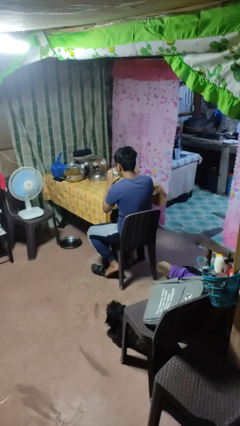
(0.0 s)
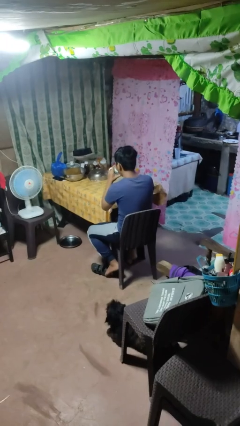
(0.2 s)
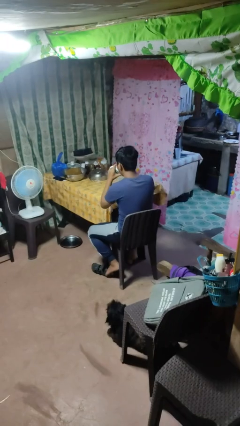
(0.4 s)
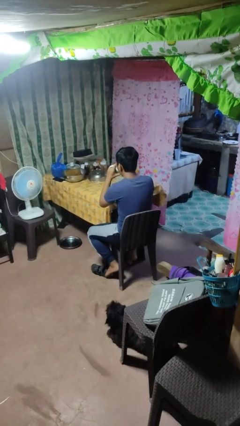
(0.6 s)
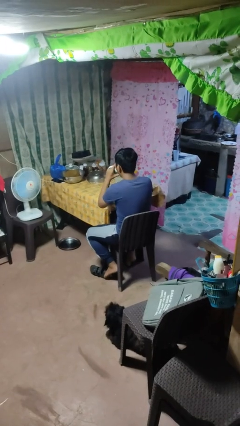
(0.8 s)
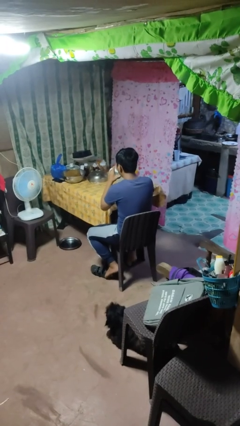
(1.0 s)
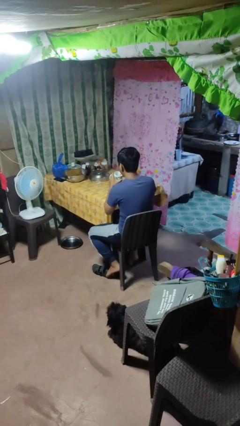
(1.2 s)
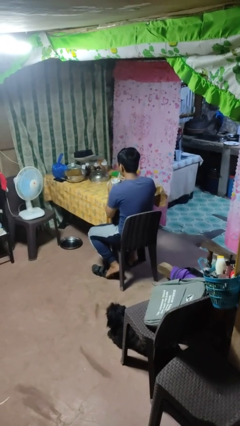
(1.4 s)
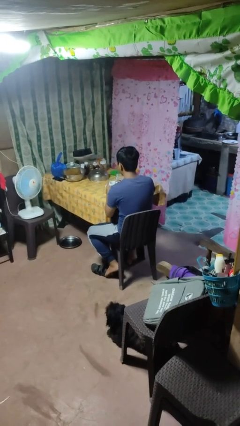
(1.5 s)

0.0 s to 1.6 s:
person drinks from mug

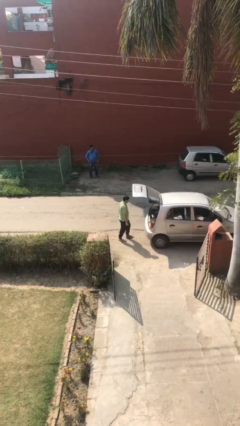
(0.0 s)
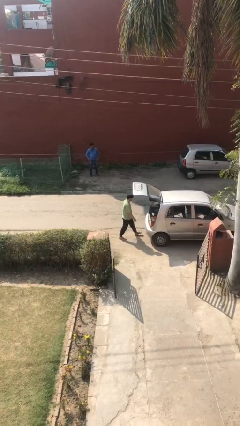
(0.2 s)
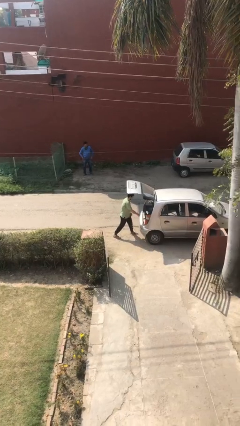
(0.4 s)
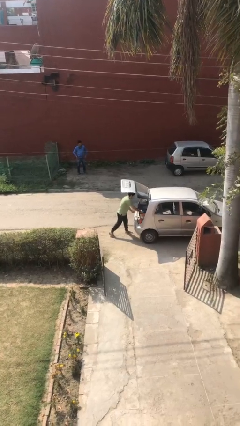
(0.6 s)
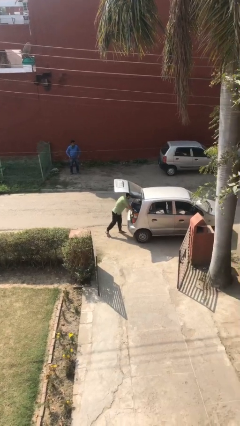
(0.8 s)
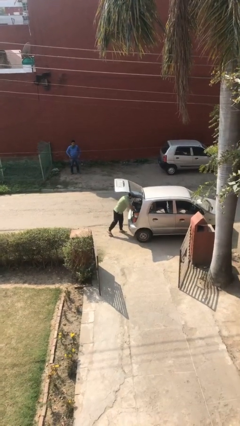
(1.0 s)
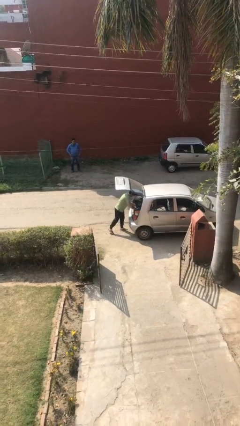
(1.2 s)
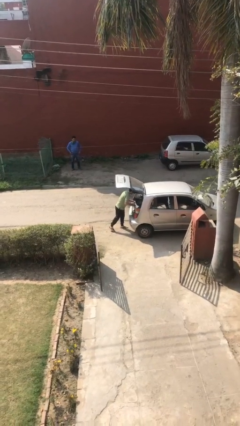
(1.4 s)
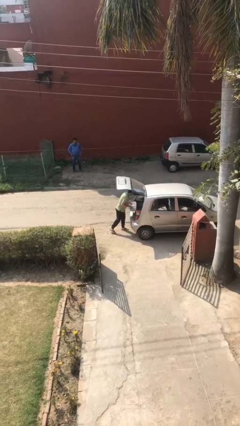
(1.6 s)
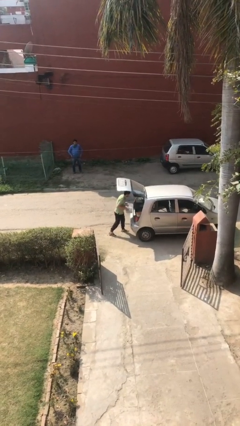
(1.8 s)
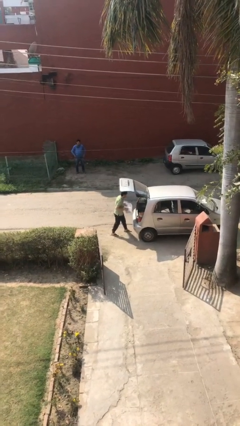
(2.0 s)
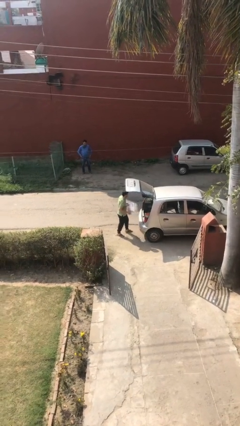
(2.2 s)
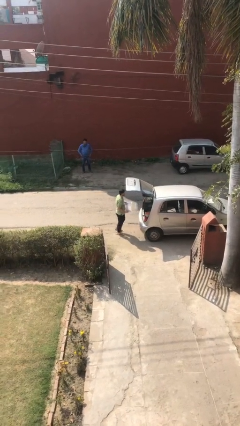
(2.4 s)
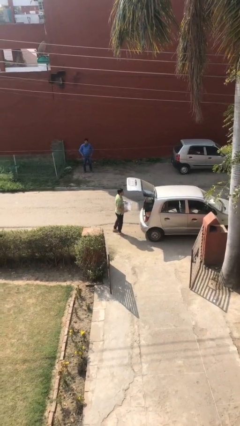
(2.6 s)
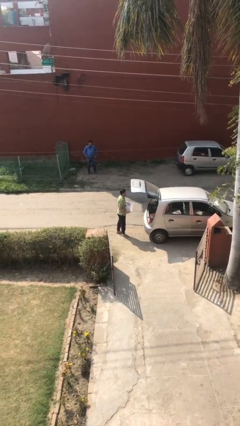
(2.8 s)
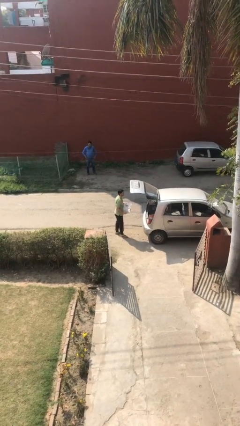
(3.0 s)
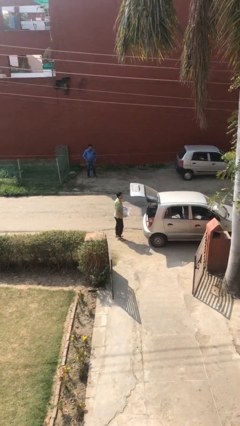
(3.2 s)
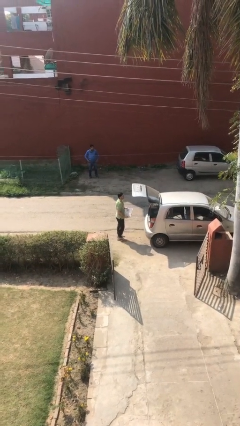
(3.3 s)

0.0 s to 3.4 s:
person unloads car

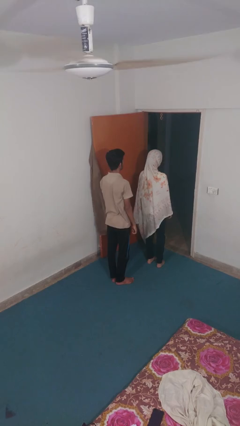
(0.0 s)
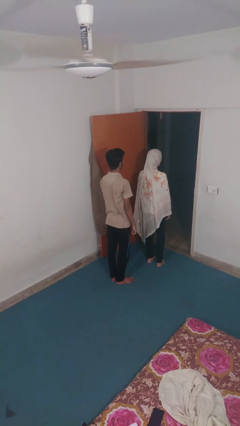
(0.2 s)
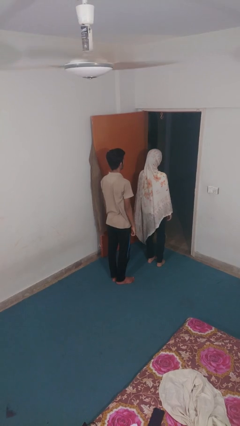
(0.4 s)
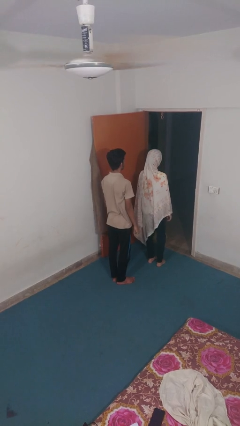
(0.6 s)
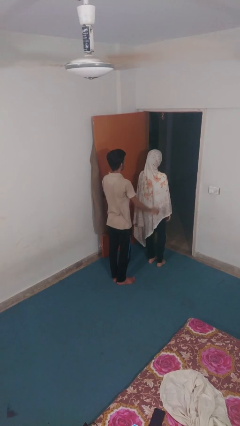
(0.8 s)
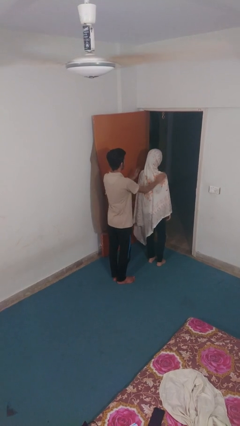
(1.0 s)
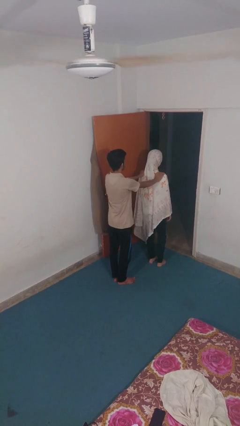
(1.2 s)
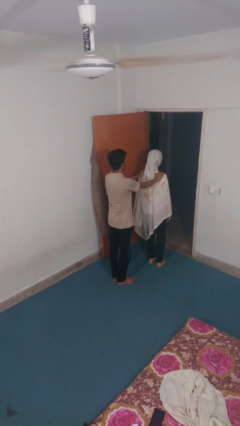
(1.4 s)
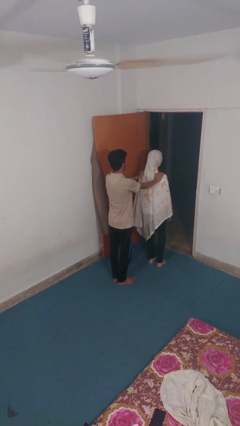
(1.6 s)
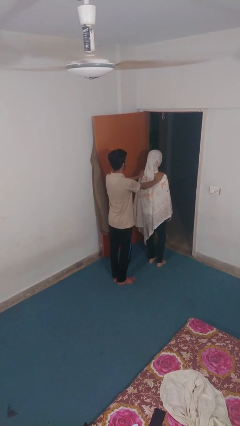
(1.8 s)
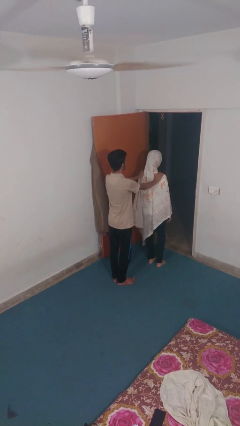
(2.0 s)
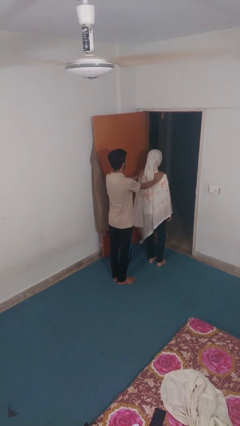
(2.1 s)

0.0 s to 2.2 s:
person grabs person by shoulder

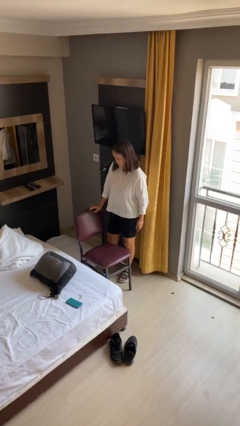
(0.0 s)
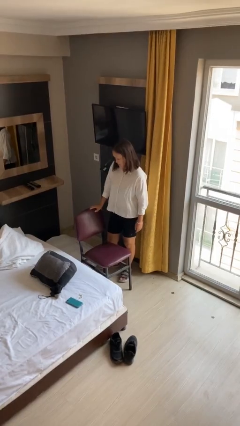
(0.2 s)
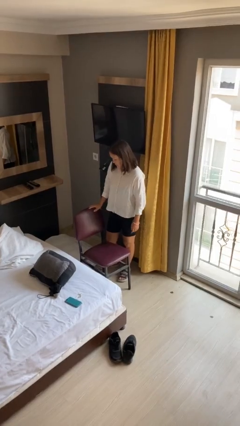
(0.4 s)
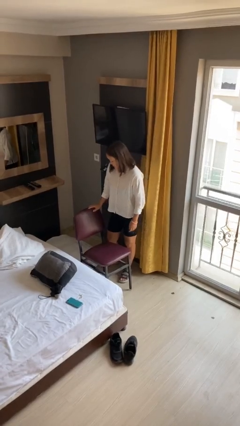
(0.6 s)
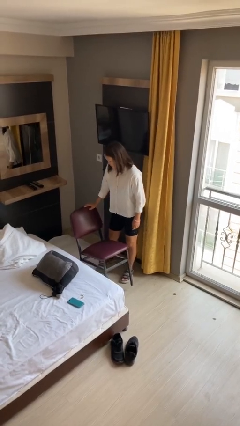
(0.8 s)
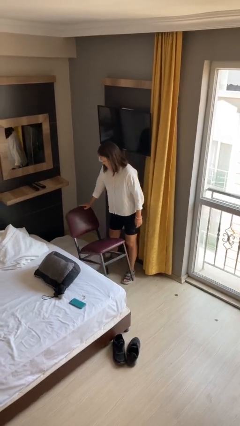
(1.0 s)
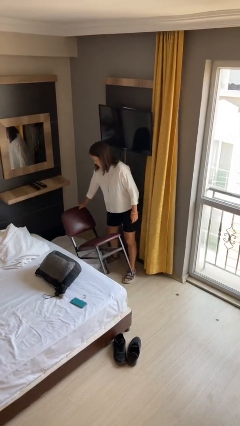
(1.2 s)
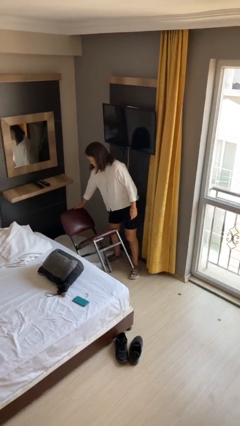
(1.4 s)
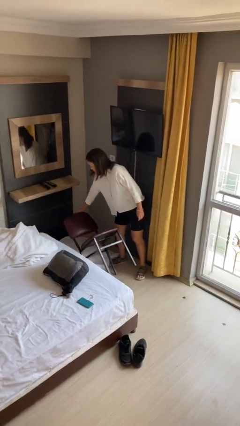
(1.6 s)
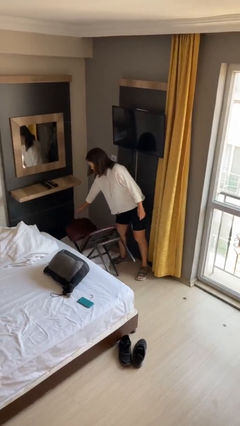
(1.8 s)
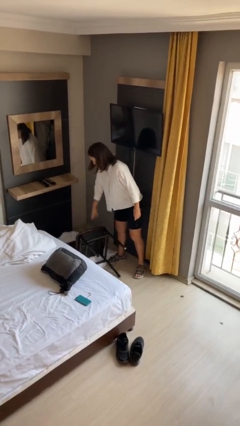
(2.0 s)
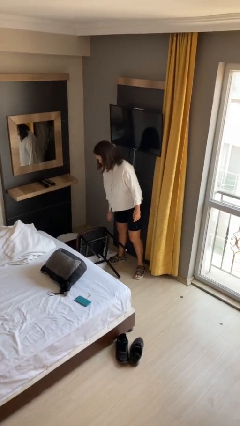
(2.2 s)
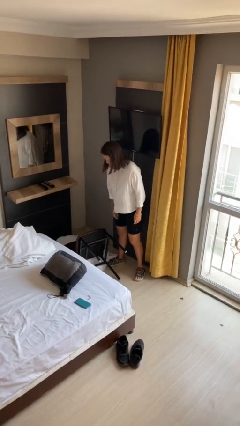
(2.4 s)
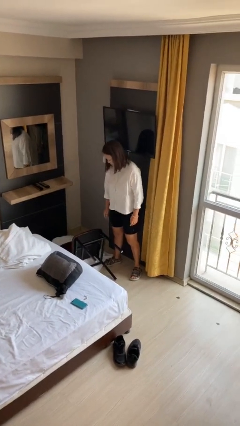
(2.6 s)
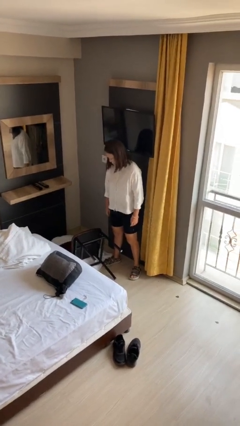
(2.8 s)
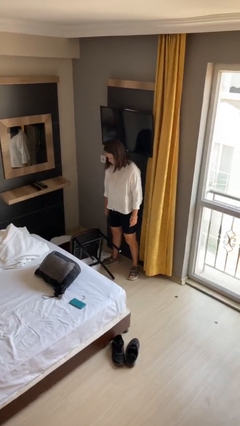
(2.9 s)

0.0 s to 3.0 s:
person knocks over furniture

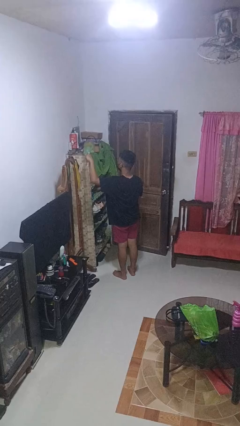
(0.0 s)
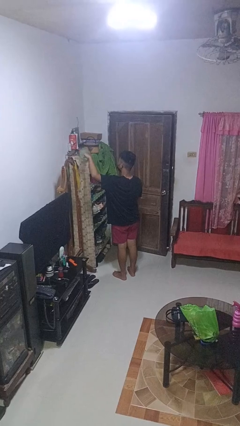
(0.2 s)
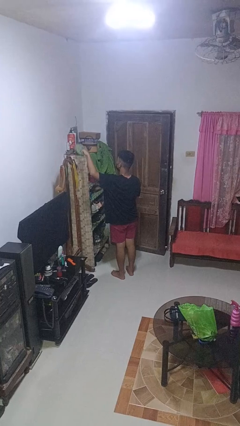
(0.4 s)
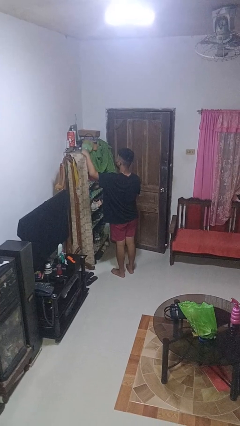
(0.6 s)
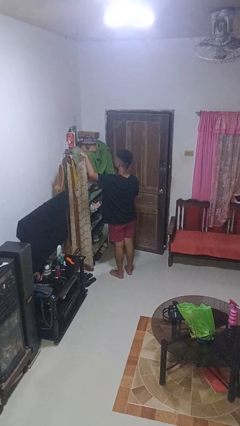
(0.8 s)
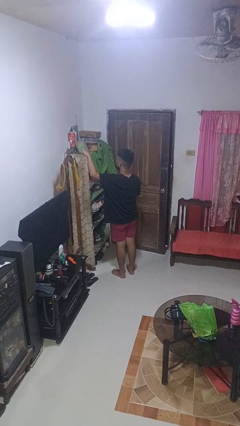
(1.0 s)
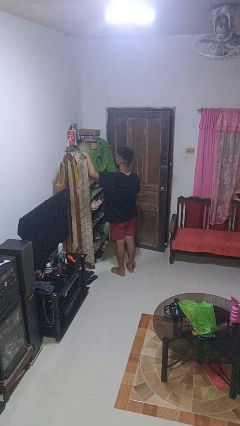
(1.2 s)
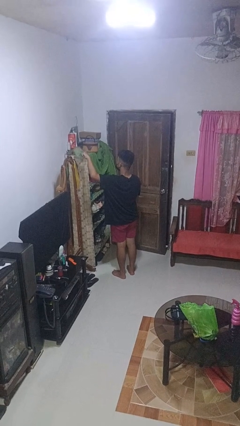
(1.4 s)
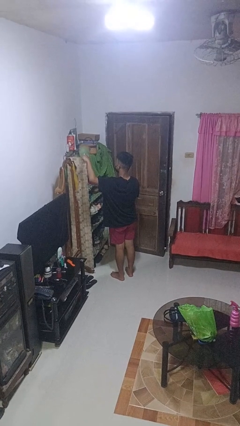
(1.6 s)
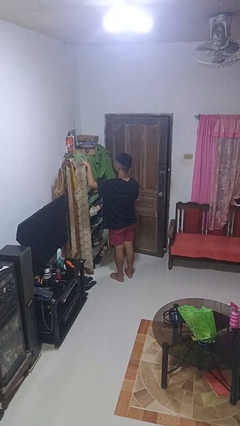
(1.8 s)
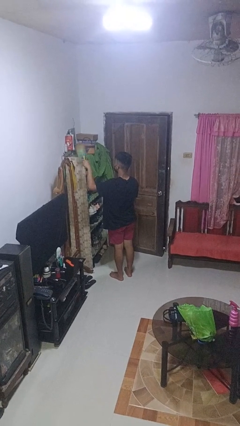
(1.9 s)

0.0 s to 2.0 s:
person dusts furniture

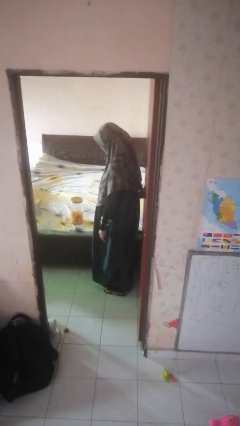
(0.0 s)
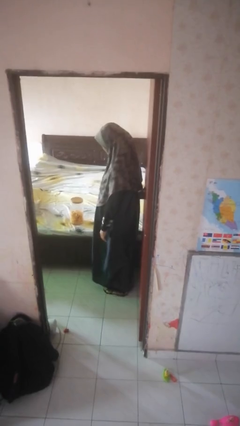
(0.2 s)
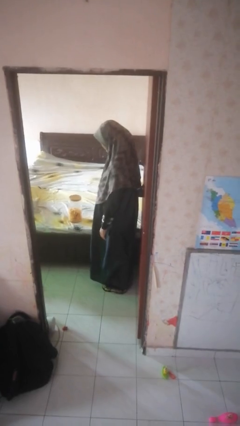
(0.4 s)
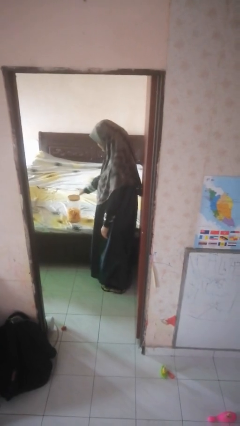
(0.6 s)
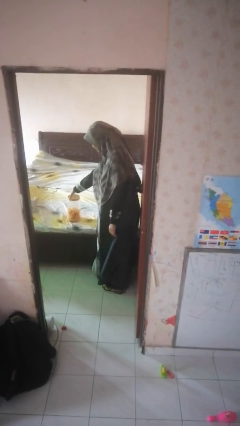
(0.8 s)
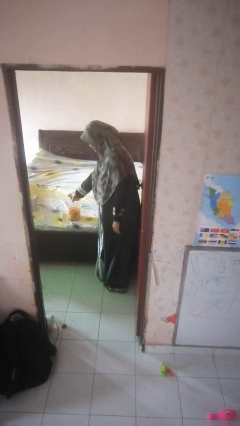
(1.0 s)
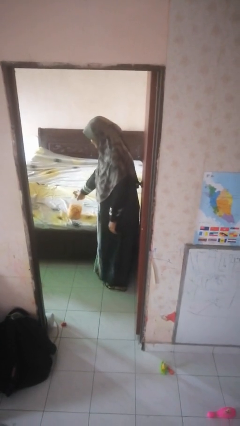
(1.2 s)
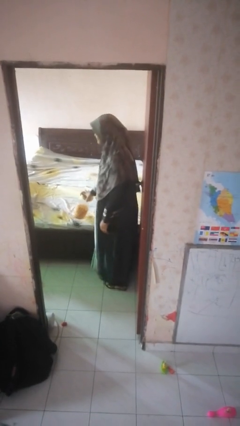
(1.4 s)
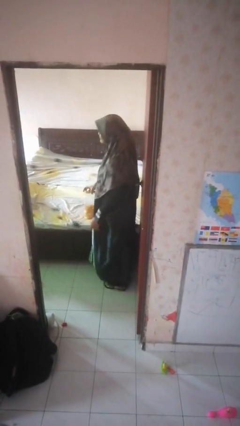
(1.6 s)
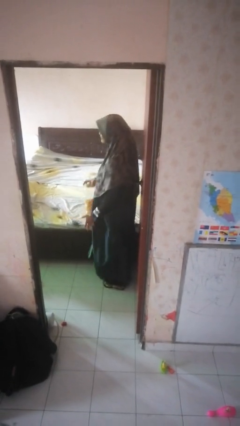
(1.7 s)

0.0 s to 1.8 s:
person picks up object from bed

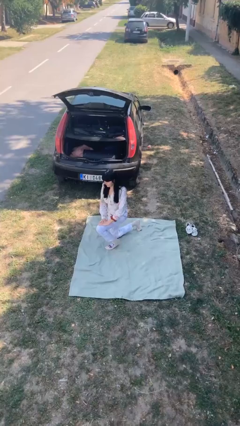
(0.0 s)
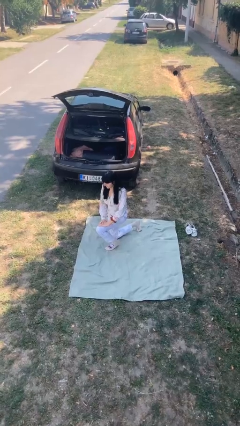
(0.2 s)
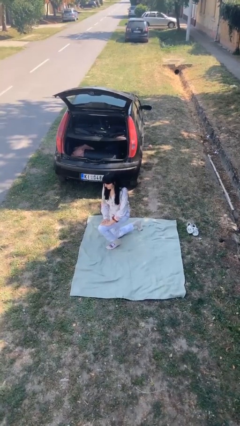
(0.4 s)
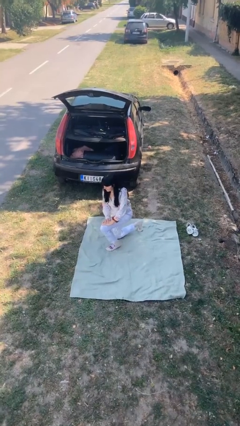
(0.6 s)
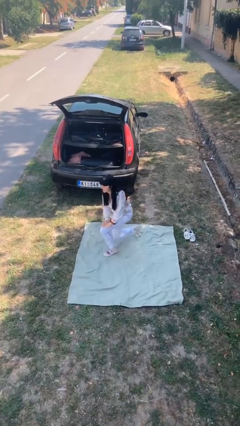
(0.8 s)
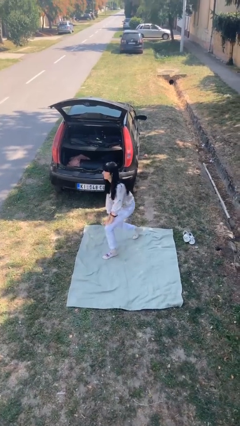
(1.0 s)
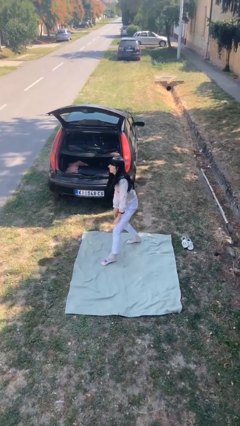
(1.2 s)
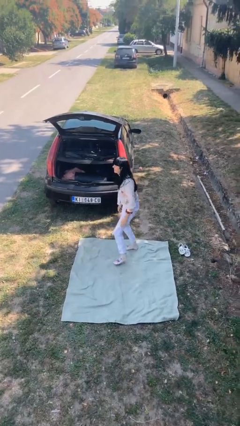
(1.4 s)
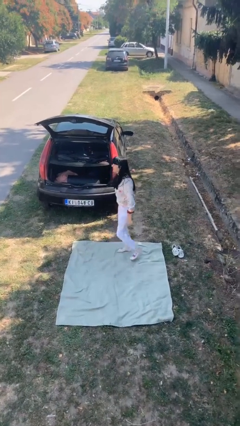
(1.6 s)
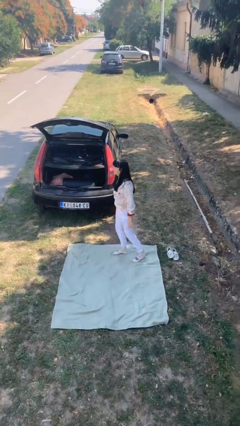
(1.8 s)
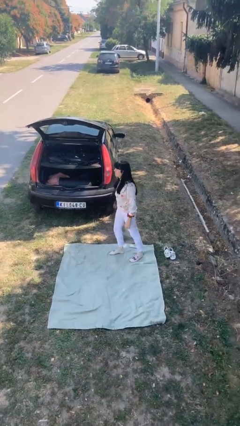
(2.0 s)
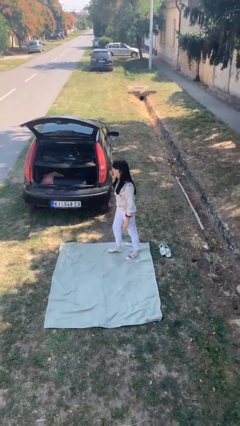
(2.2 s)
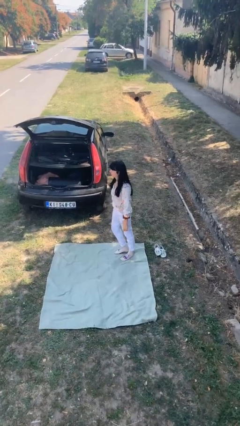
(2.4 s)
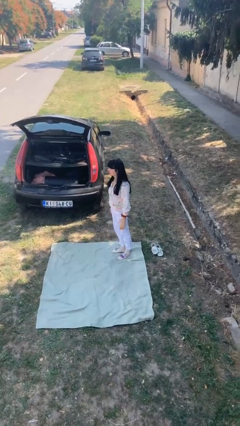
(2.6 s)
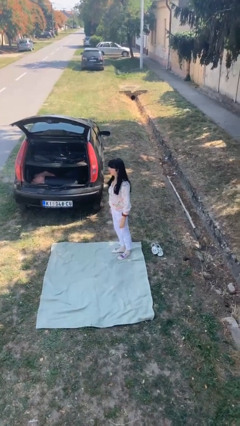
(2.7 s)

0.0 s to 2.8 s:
person stands up from floor

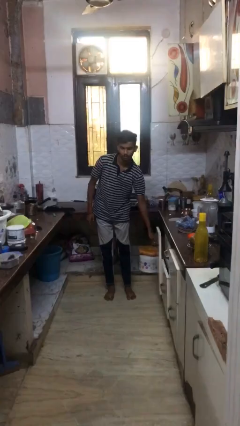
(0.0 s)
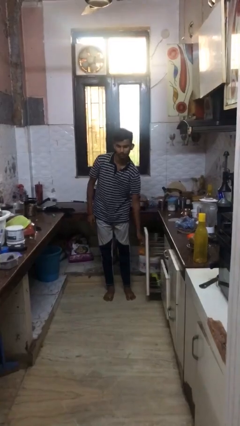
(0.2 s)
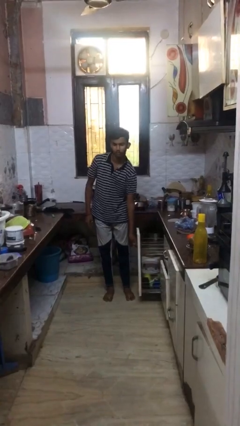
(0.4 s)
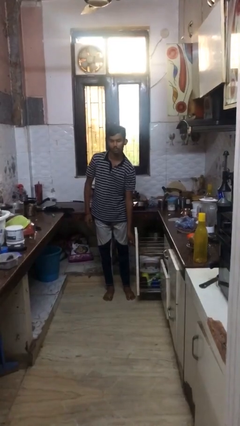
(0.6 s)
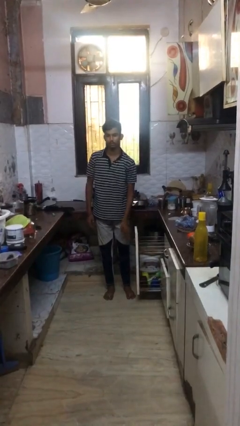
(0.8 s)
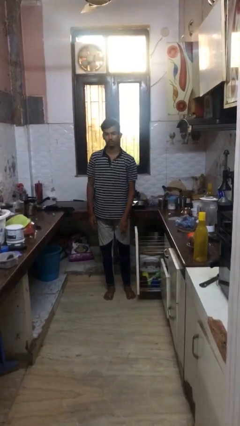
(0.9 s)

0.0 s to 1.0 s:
person opens dishwasher
